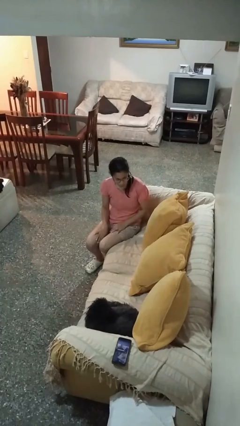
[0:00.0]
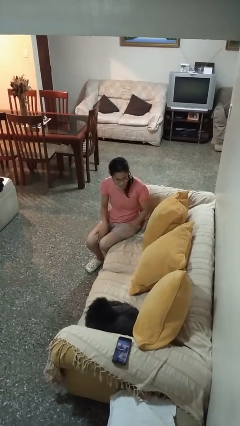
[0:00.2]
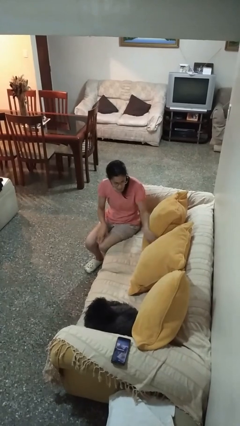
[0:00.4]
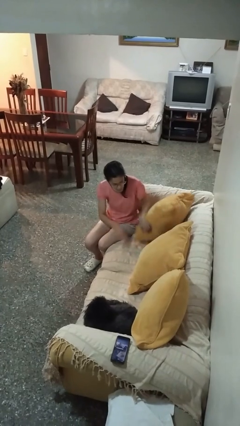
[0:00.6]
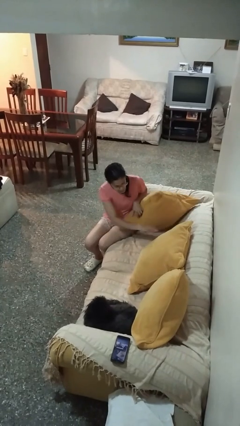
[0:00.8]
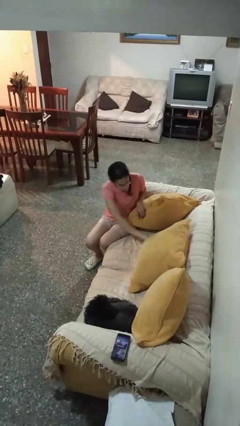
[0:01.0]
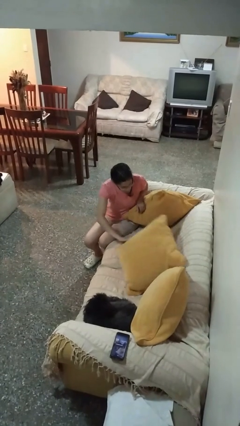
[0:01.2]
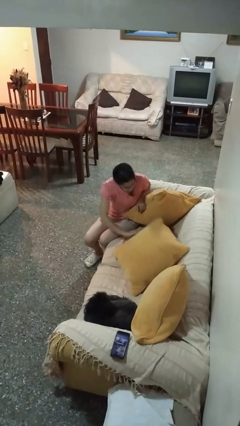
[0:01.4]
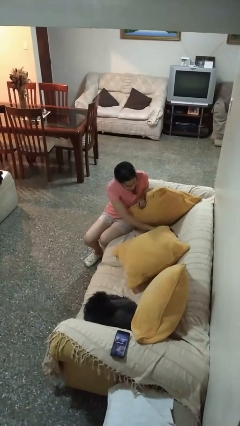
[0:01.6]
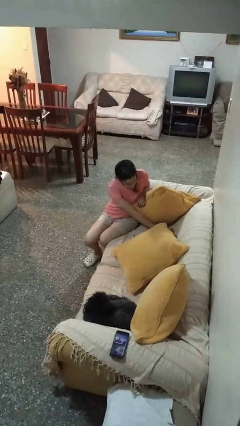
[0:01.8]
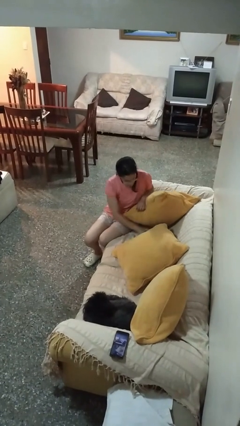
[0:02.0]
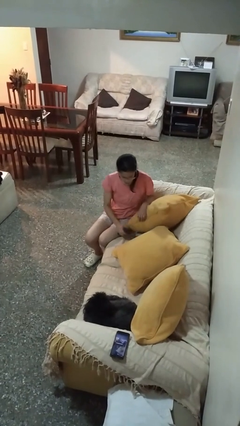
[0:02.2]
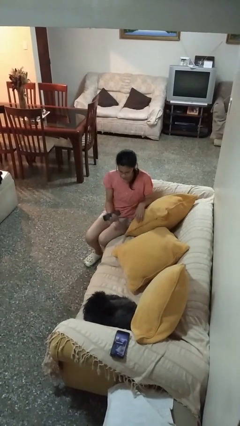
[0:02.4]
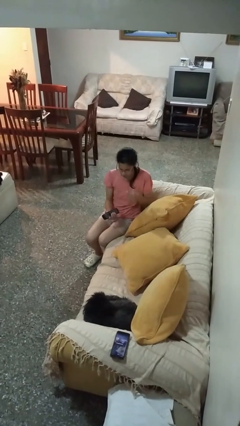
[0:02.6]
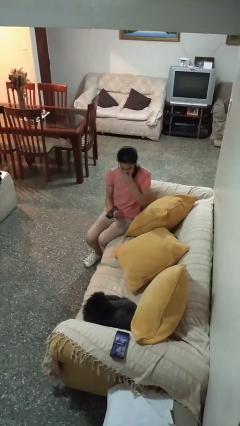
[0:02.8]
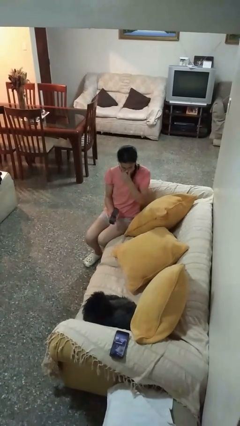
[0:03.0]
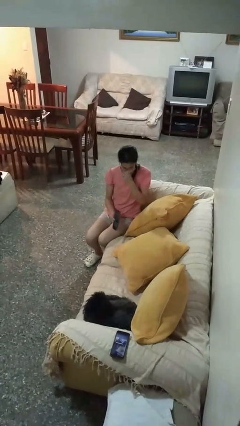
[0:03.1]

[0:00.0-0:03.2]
person searches in couch

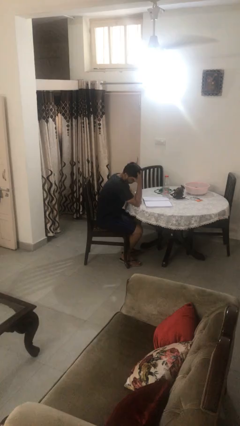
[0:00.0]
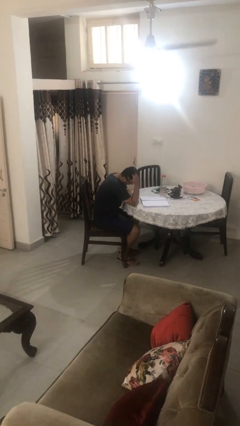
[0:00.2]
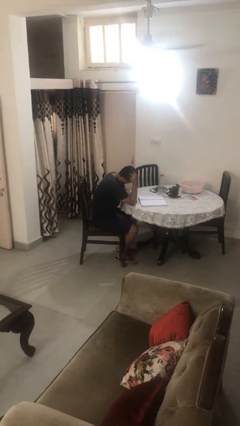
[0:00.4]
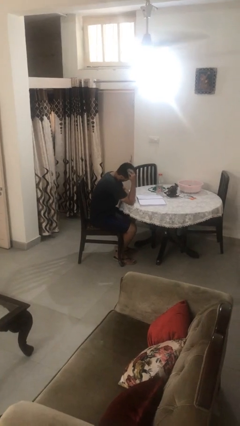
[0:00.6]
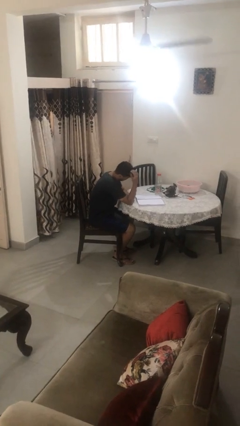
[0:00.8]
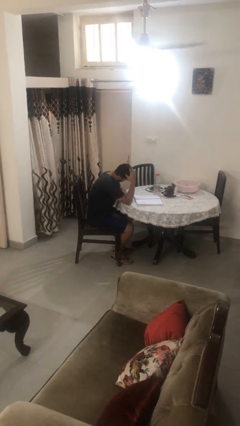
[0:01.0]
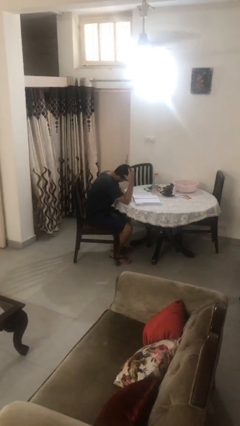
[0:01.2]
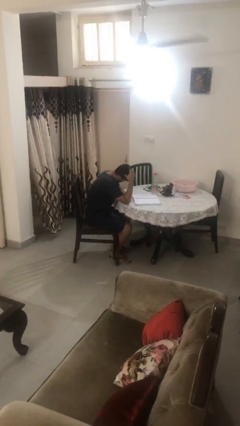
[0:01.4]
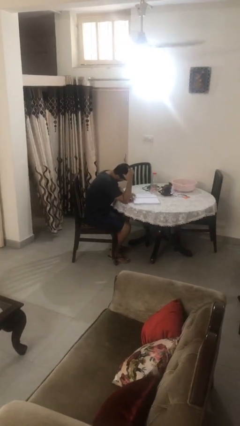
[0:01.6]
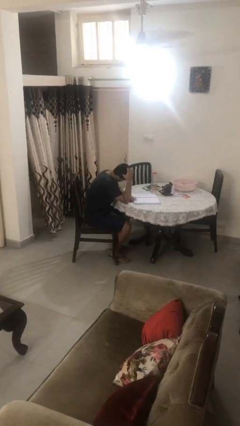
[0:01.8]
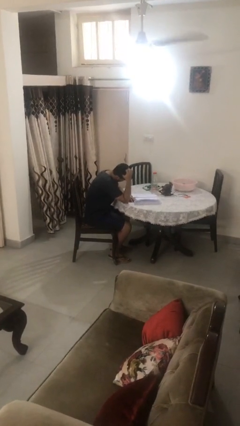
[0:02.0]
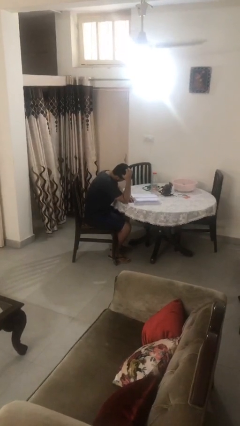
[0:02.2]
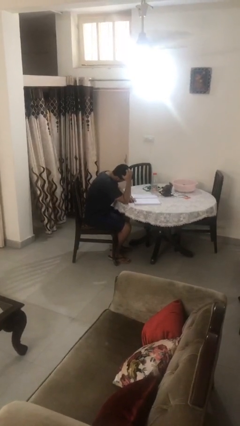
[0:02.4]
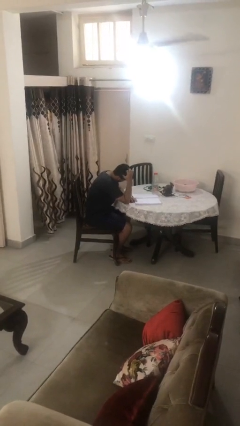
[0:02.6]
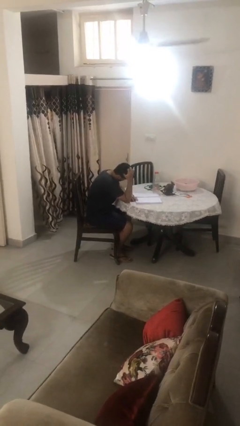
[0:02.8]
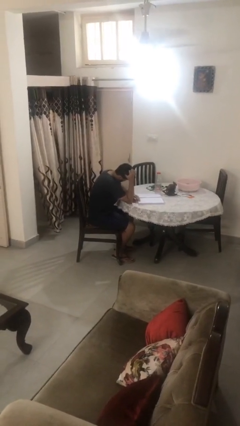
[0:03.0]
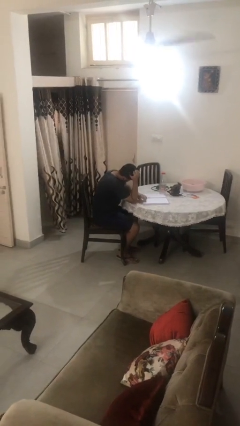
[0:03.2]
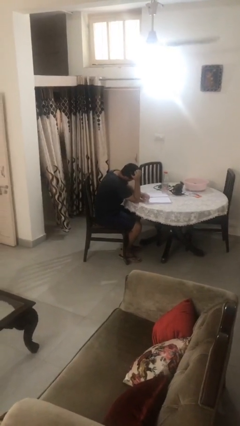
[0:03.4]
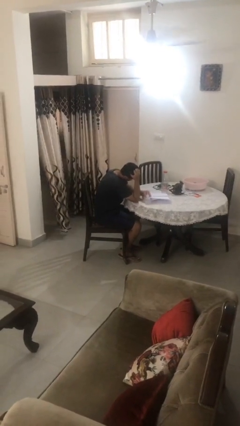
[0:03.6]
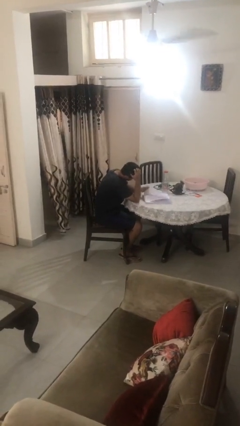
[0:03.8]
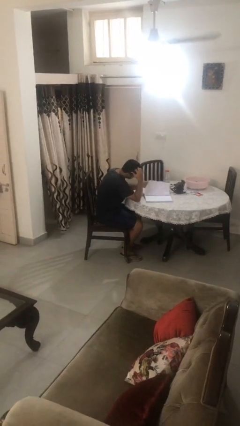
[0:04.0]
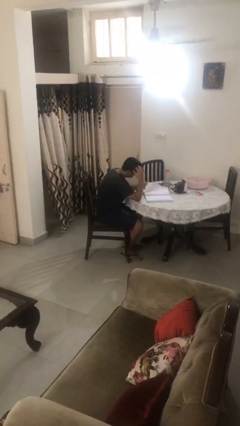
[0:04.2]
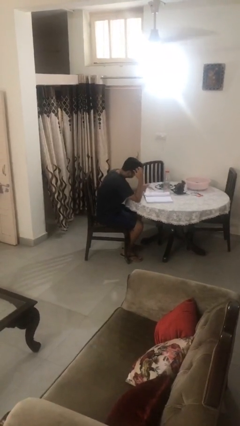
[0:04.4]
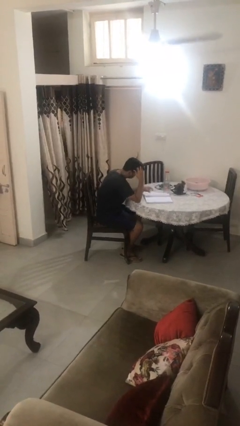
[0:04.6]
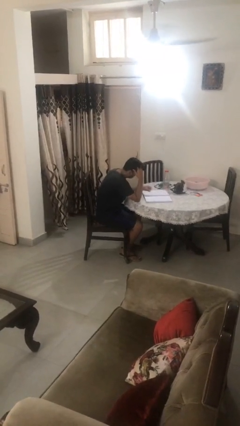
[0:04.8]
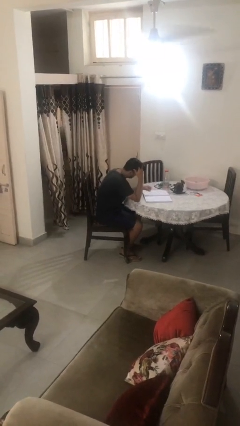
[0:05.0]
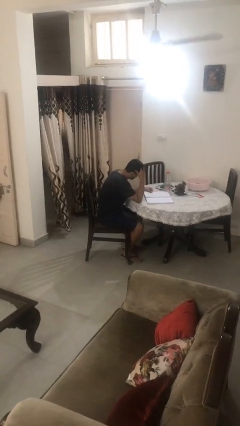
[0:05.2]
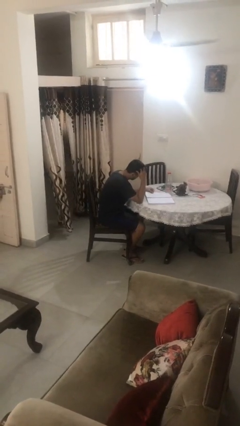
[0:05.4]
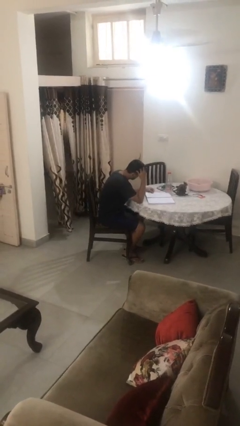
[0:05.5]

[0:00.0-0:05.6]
person reads document

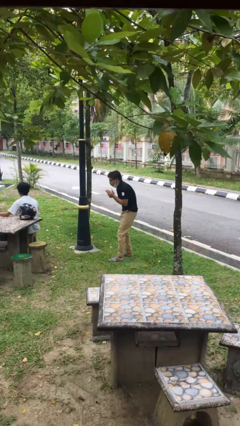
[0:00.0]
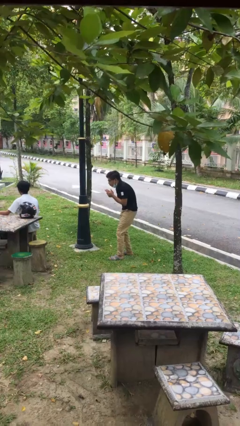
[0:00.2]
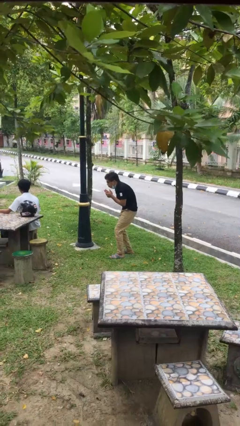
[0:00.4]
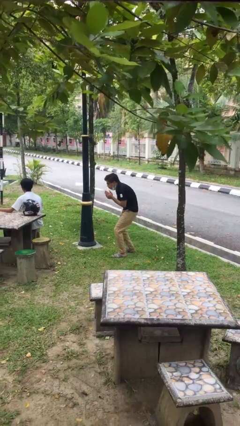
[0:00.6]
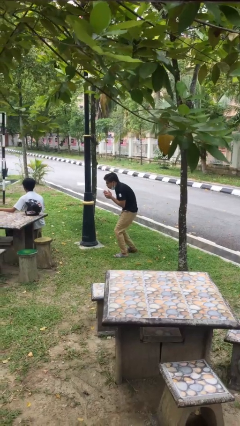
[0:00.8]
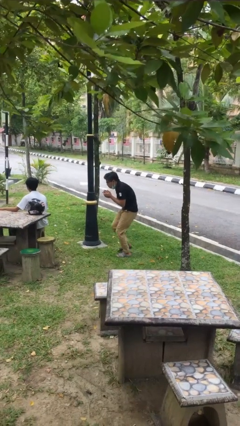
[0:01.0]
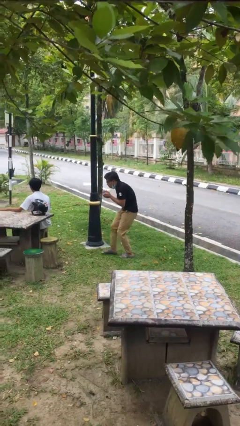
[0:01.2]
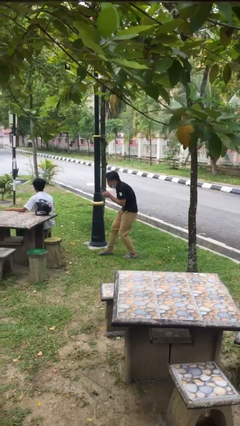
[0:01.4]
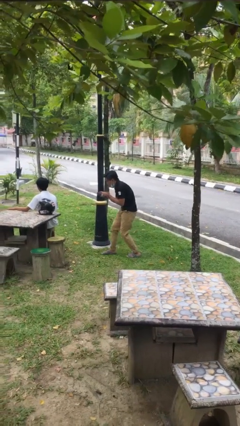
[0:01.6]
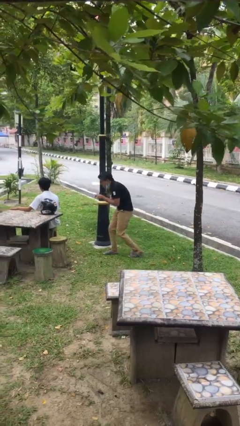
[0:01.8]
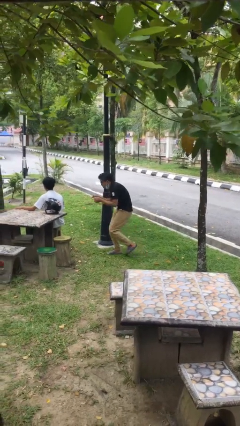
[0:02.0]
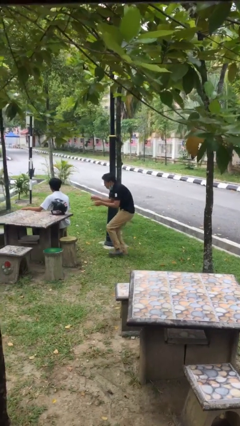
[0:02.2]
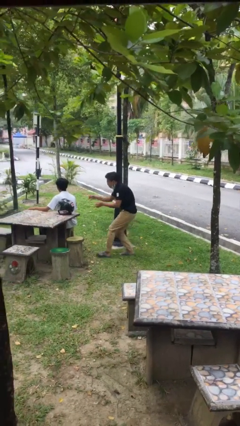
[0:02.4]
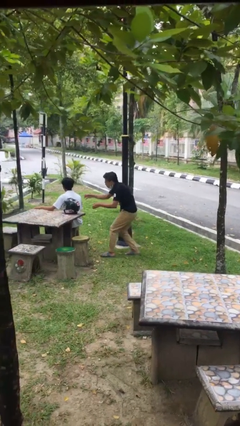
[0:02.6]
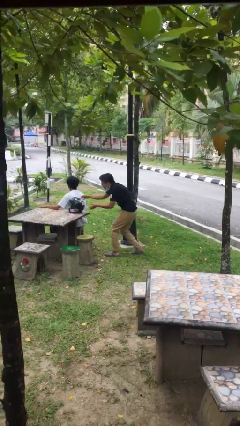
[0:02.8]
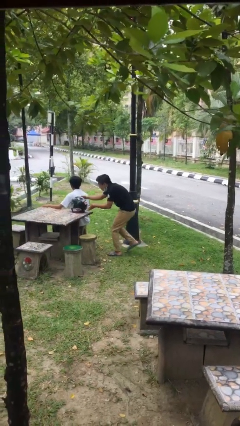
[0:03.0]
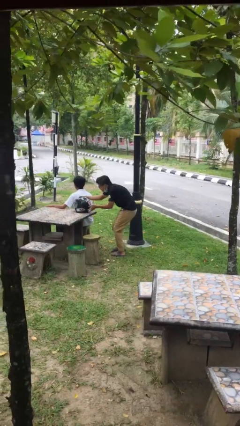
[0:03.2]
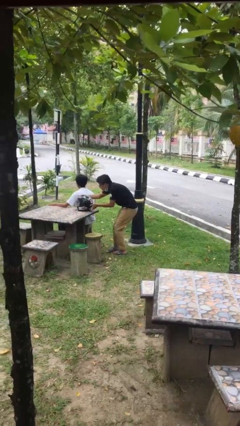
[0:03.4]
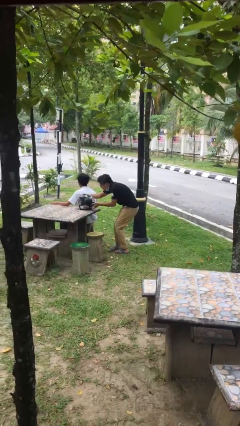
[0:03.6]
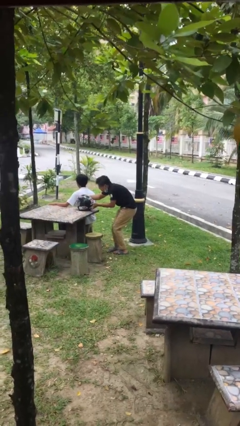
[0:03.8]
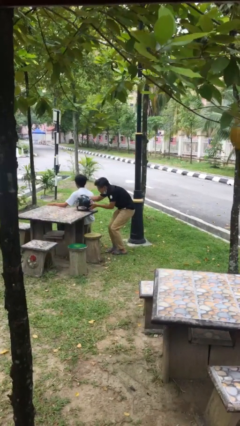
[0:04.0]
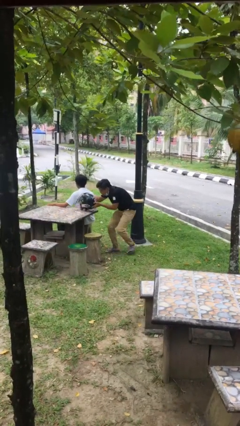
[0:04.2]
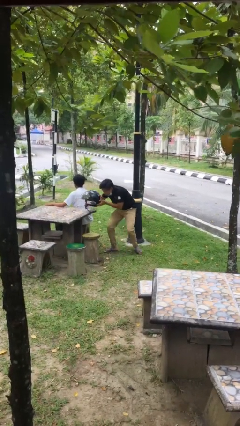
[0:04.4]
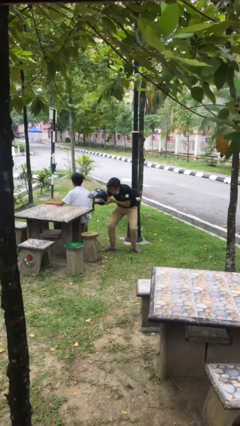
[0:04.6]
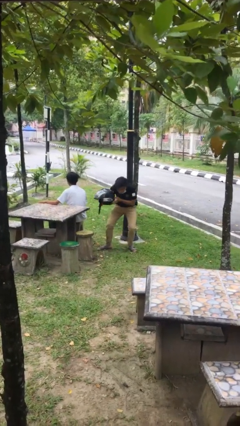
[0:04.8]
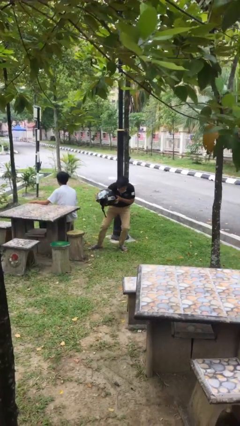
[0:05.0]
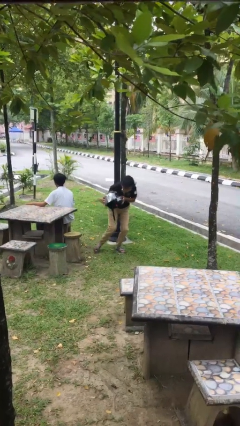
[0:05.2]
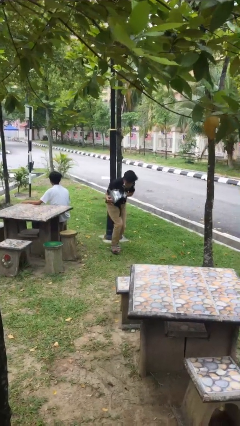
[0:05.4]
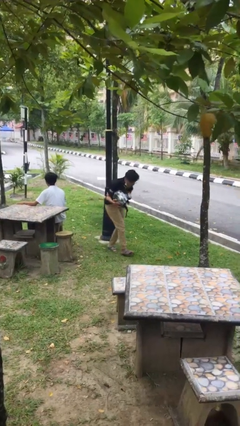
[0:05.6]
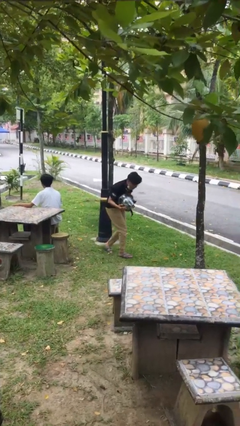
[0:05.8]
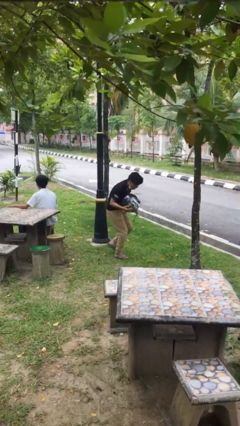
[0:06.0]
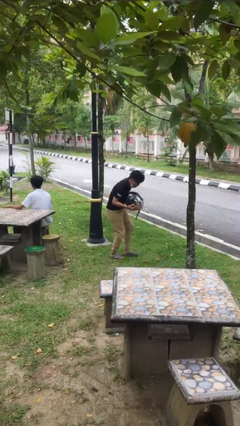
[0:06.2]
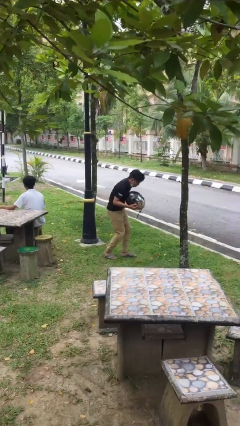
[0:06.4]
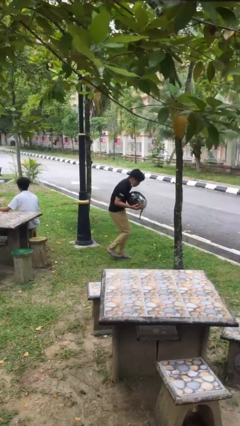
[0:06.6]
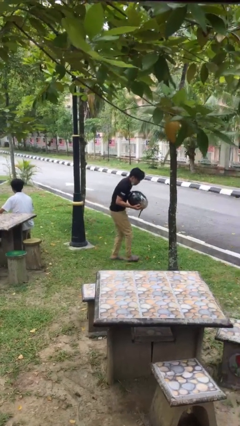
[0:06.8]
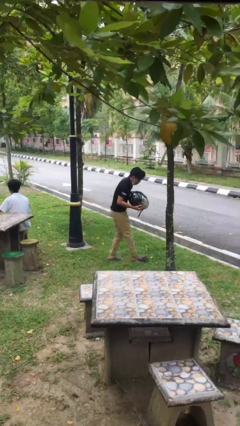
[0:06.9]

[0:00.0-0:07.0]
person steals object from person

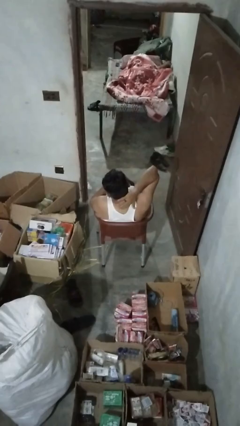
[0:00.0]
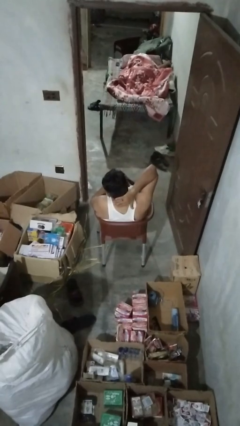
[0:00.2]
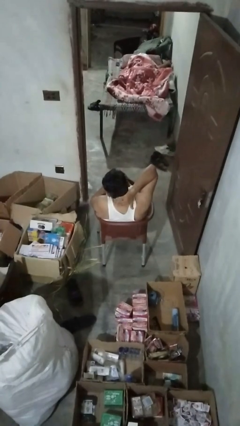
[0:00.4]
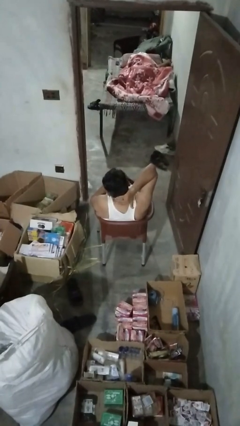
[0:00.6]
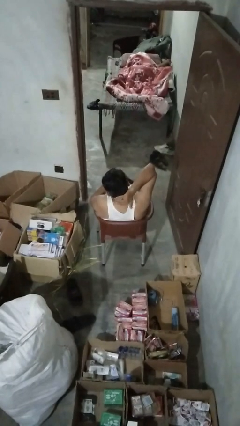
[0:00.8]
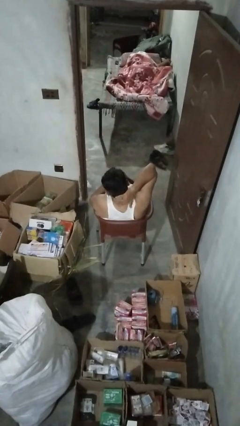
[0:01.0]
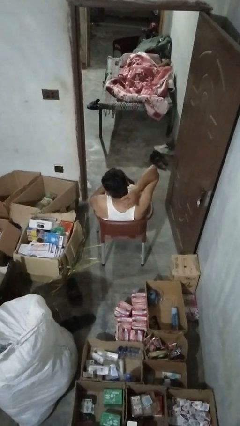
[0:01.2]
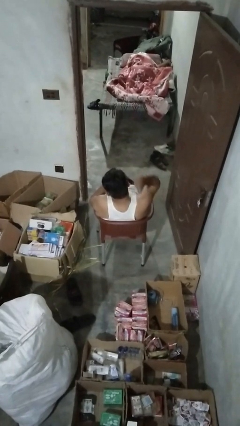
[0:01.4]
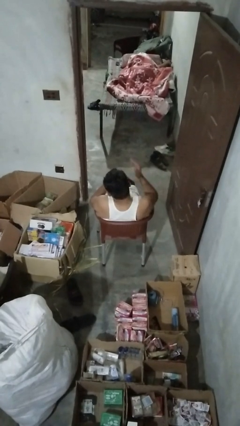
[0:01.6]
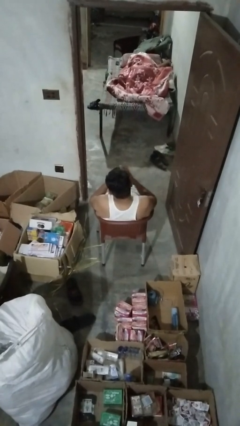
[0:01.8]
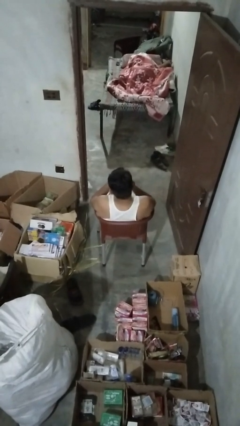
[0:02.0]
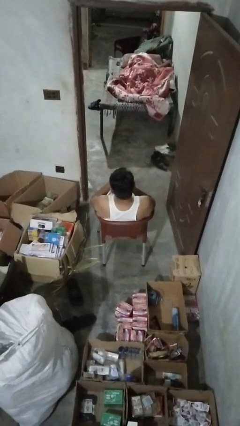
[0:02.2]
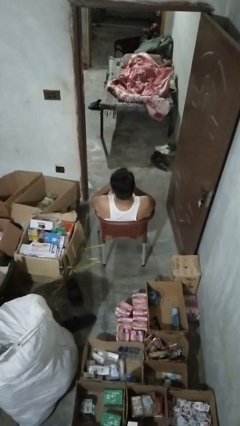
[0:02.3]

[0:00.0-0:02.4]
person rubs neck
